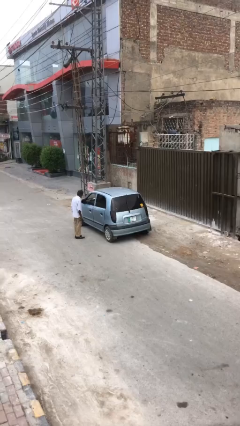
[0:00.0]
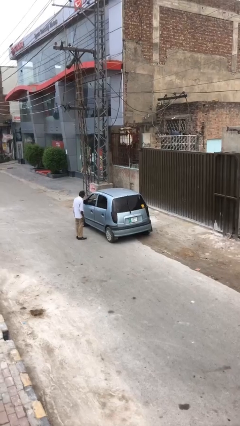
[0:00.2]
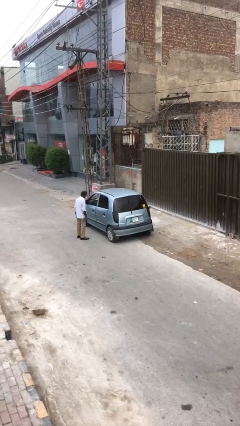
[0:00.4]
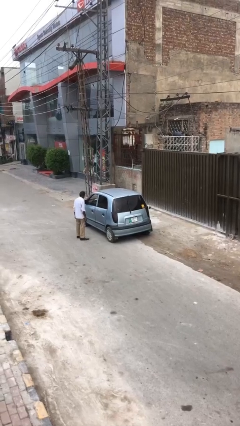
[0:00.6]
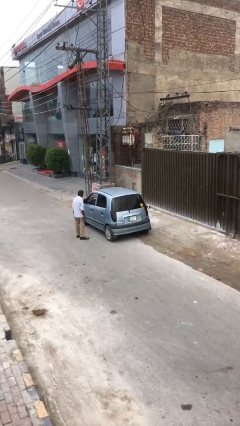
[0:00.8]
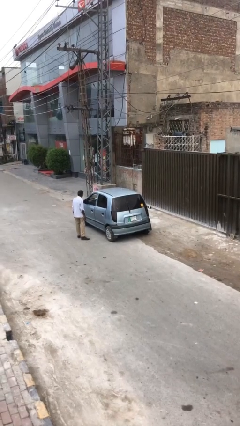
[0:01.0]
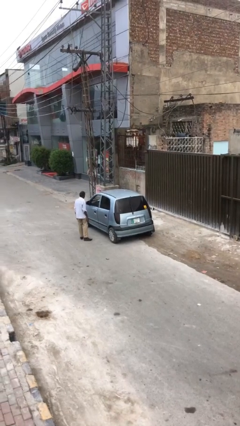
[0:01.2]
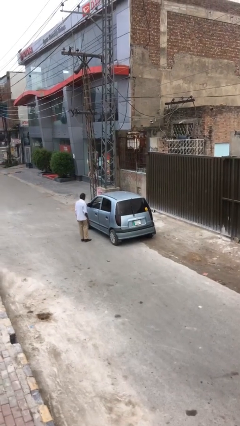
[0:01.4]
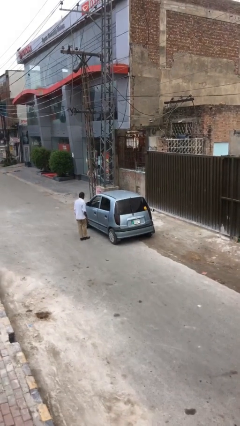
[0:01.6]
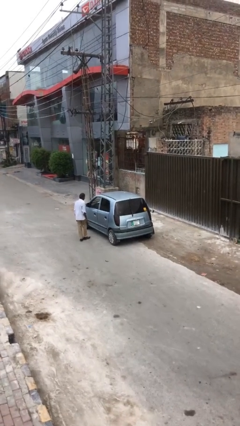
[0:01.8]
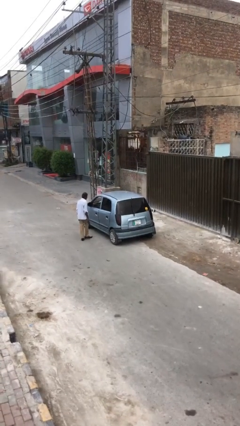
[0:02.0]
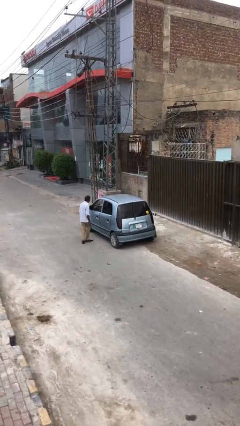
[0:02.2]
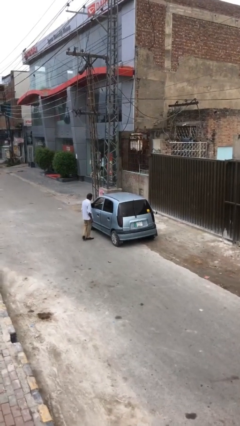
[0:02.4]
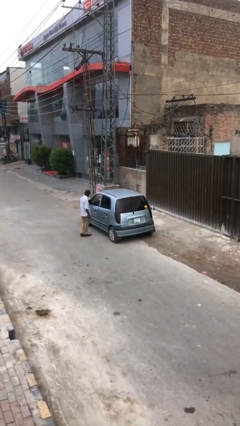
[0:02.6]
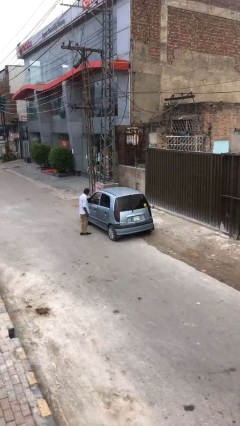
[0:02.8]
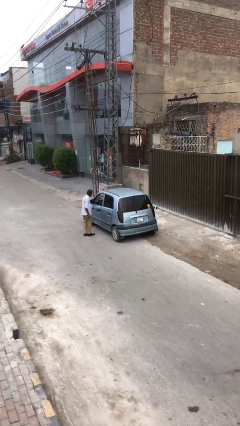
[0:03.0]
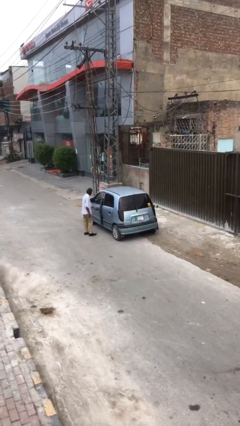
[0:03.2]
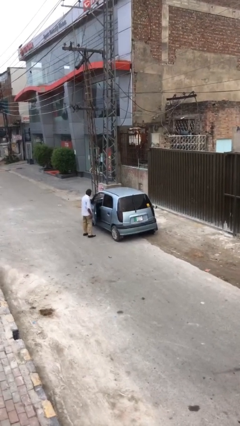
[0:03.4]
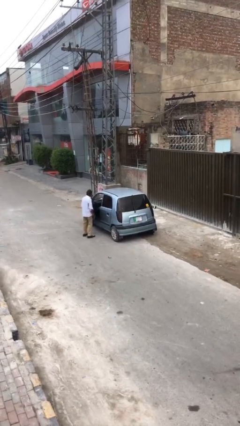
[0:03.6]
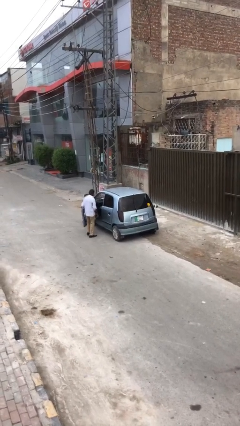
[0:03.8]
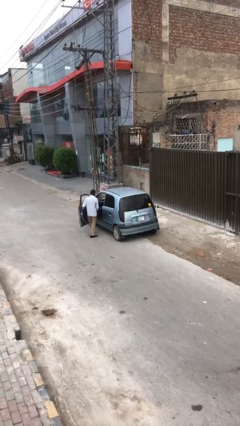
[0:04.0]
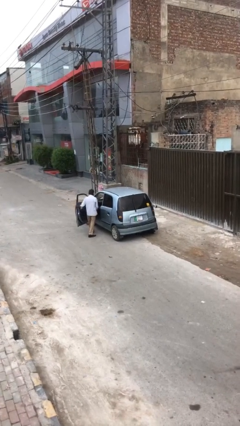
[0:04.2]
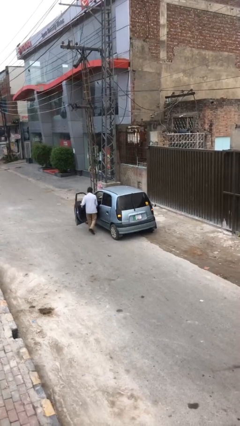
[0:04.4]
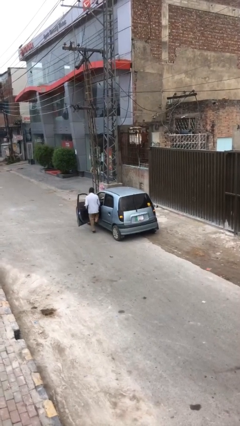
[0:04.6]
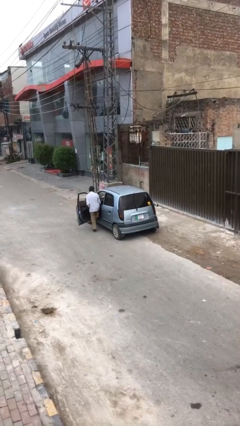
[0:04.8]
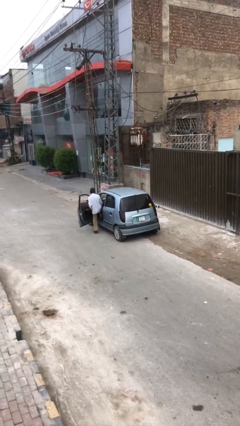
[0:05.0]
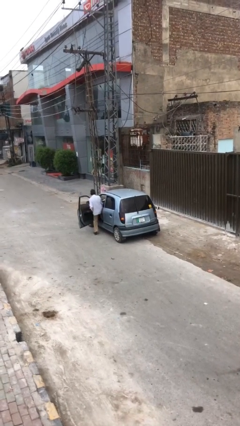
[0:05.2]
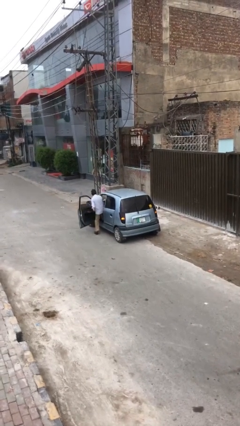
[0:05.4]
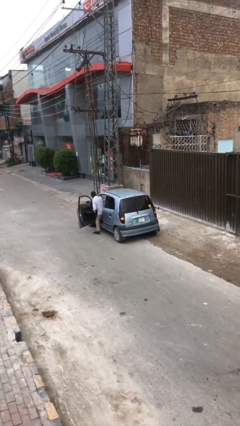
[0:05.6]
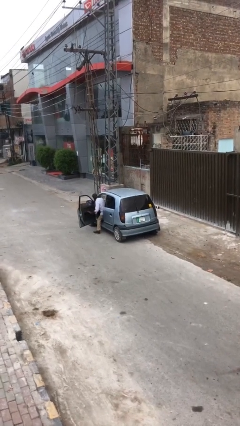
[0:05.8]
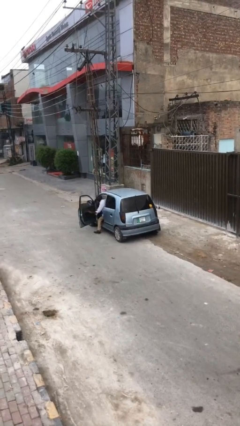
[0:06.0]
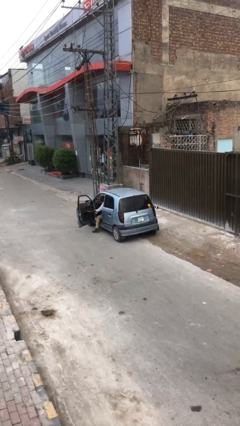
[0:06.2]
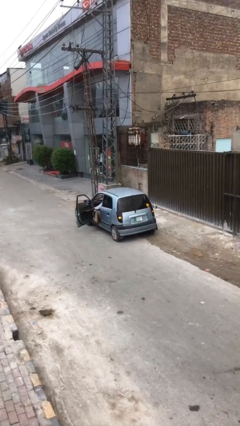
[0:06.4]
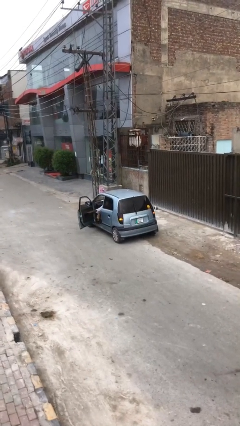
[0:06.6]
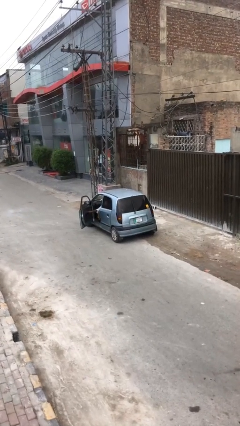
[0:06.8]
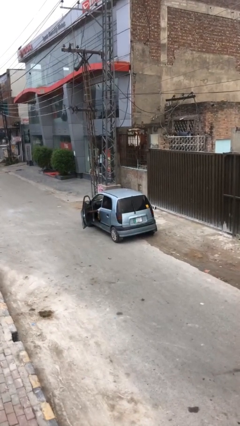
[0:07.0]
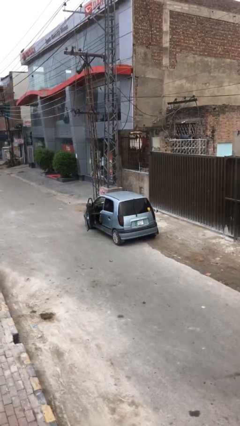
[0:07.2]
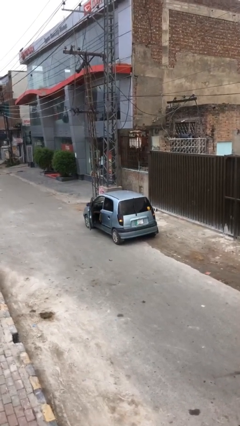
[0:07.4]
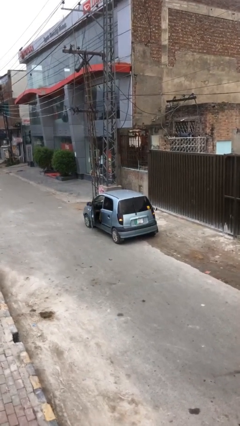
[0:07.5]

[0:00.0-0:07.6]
car picks up person

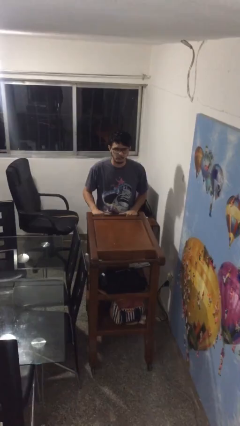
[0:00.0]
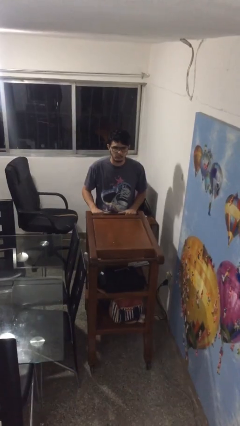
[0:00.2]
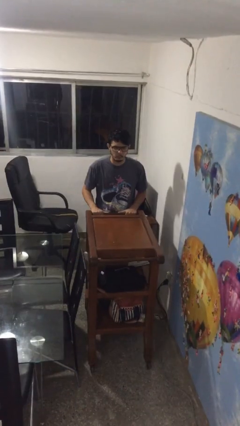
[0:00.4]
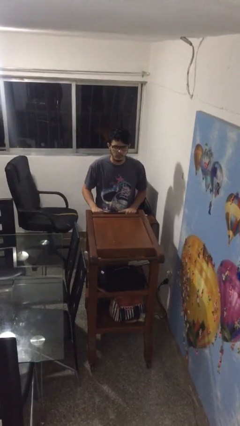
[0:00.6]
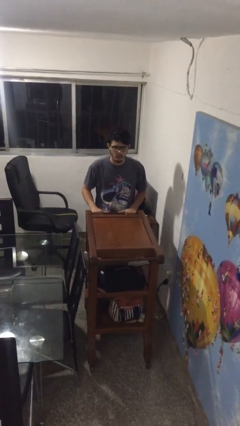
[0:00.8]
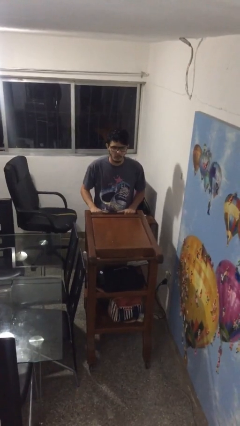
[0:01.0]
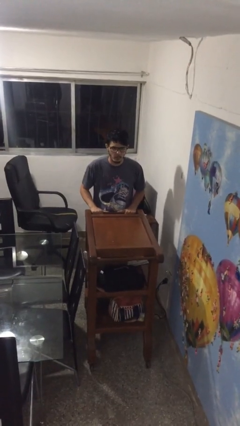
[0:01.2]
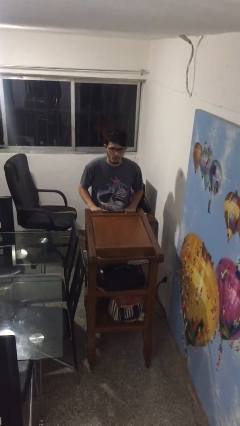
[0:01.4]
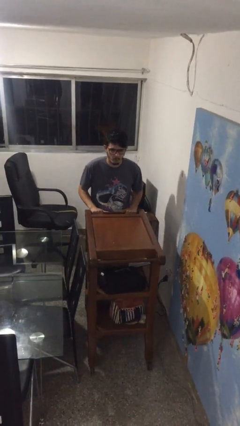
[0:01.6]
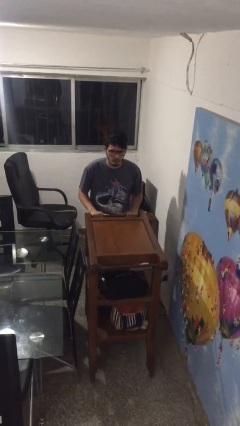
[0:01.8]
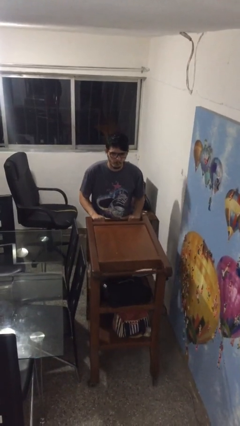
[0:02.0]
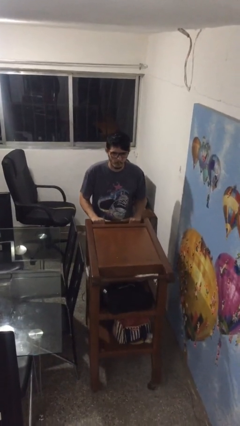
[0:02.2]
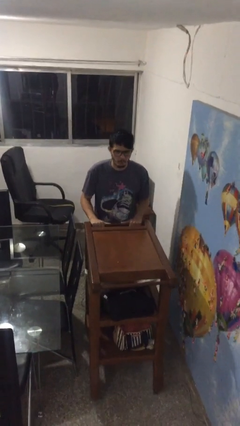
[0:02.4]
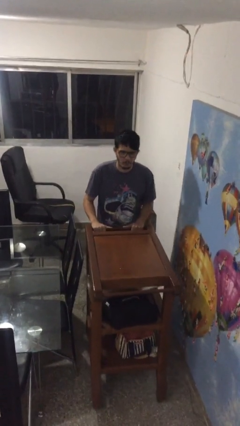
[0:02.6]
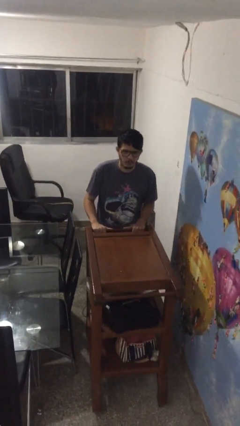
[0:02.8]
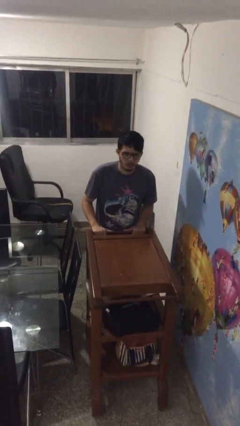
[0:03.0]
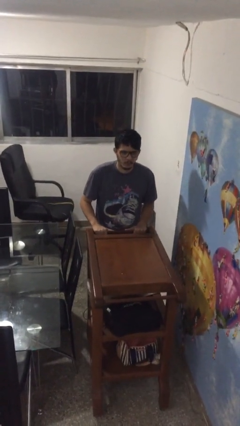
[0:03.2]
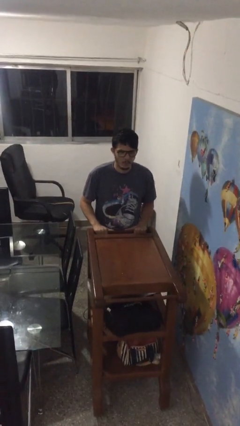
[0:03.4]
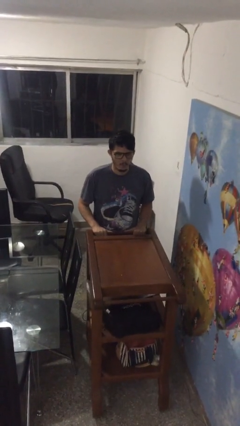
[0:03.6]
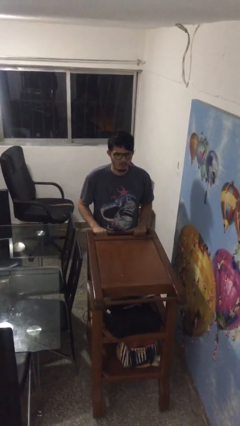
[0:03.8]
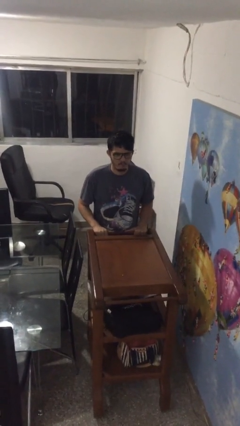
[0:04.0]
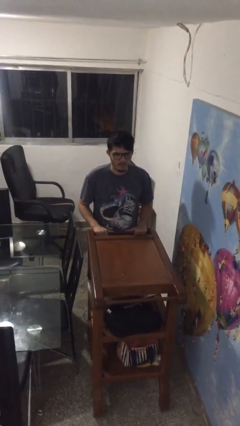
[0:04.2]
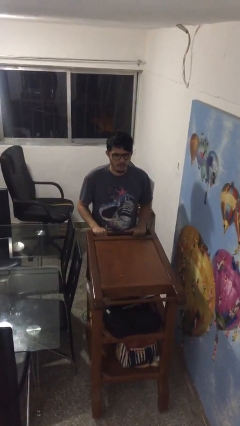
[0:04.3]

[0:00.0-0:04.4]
person pushes wheeled cart

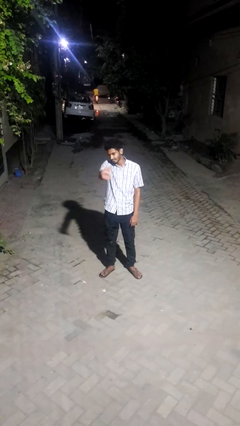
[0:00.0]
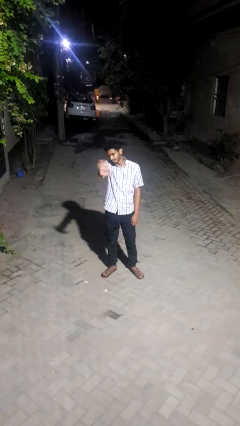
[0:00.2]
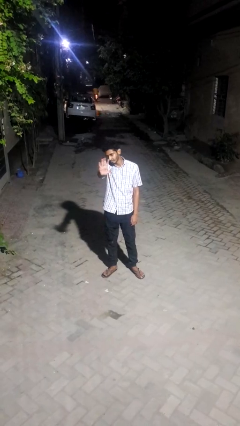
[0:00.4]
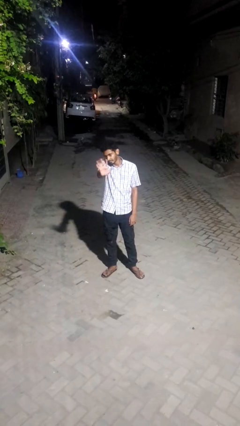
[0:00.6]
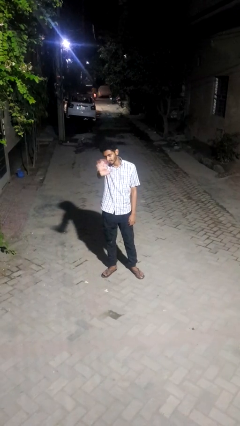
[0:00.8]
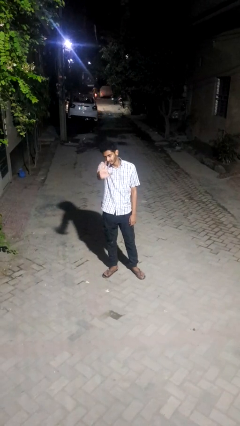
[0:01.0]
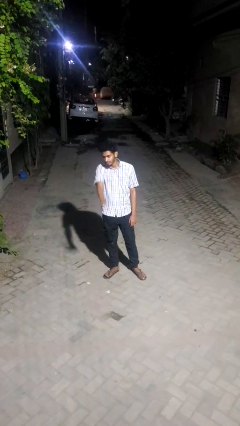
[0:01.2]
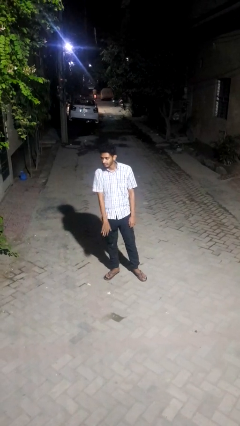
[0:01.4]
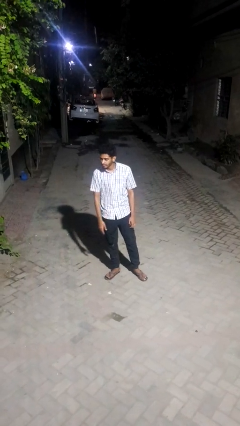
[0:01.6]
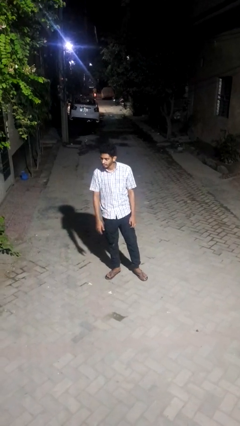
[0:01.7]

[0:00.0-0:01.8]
person waves at person

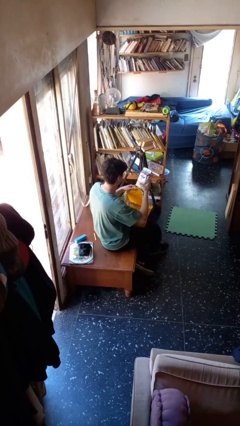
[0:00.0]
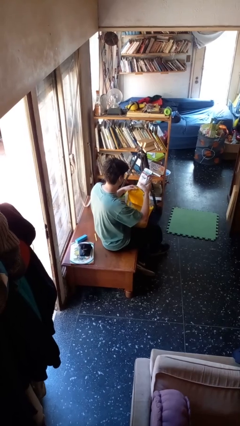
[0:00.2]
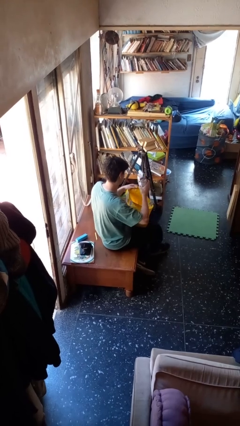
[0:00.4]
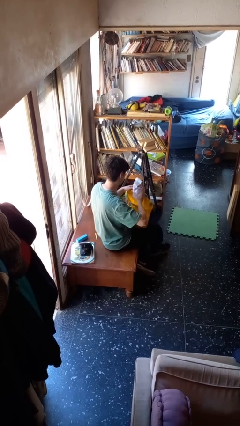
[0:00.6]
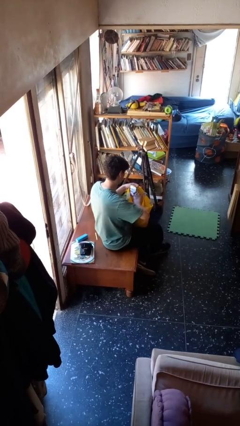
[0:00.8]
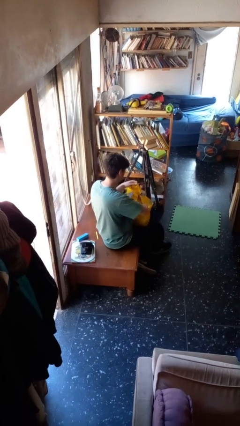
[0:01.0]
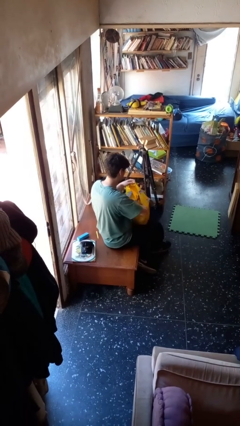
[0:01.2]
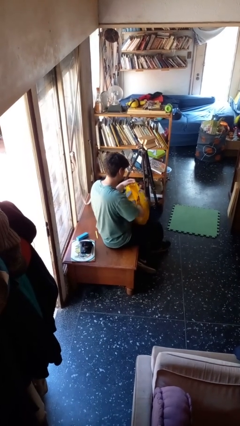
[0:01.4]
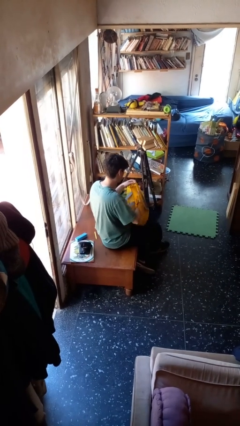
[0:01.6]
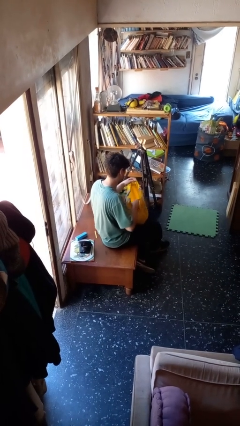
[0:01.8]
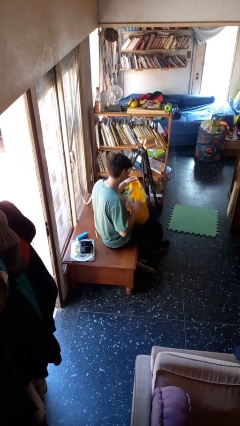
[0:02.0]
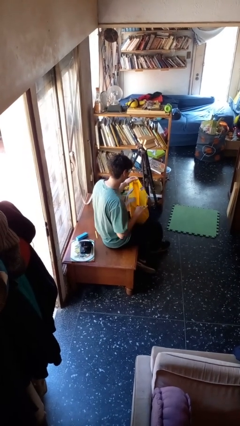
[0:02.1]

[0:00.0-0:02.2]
person puts object into bag

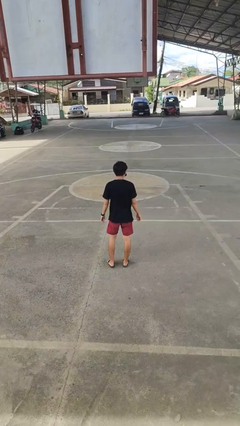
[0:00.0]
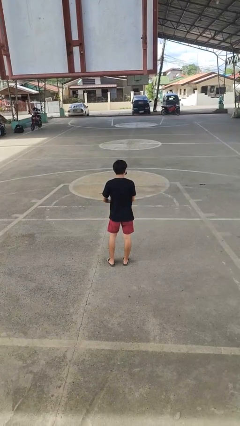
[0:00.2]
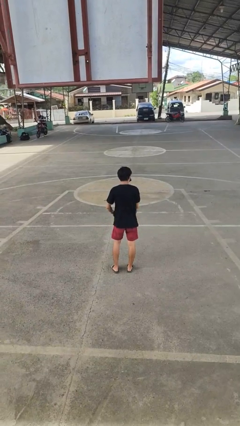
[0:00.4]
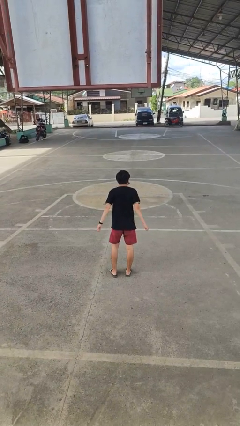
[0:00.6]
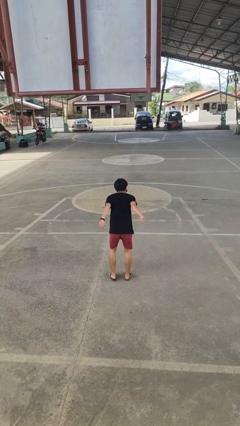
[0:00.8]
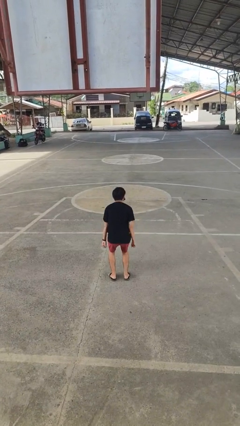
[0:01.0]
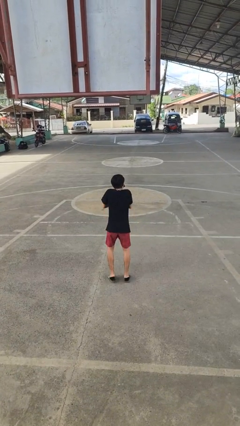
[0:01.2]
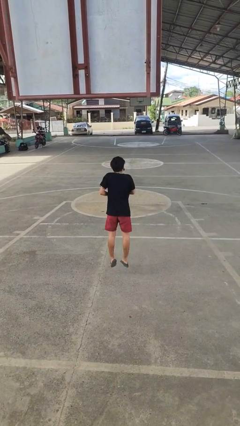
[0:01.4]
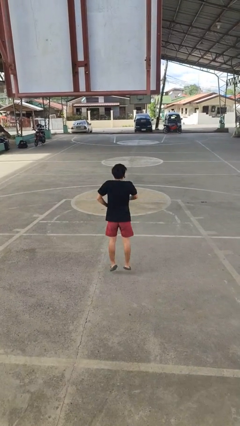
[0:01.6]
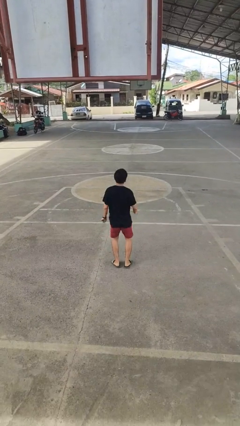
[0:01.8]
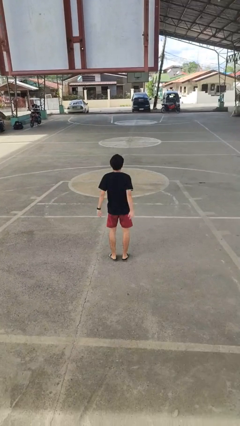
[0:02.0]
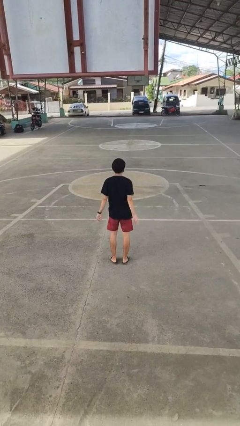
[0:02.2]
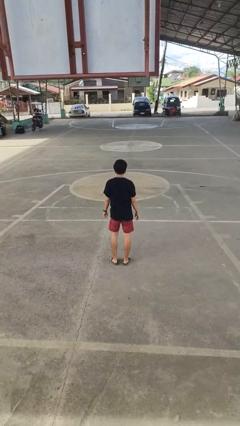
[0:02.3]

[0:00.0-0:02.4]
person jumps
